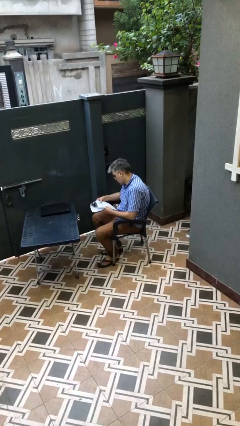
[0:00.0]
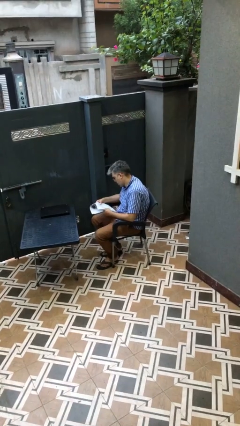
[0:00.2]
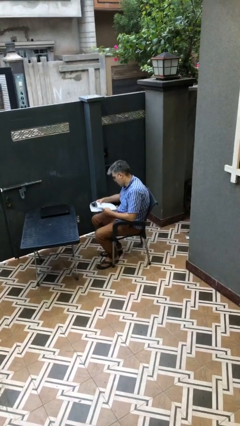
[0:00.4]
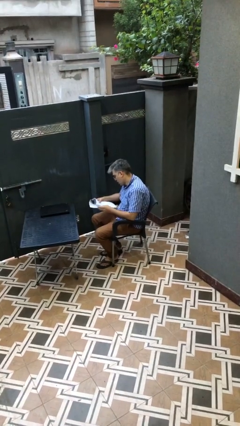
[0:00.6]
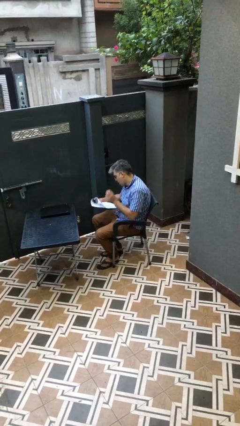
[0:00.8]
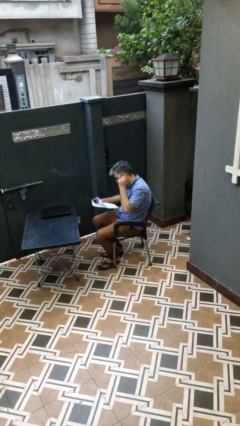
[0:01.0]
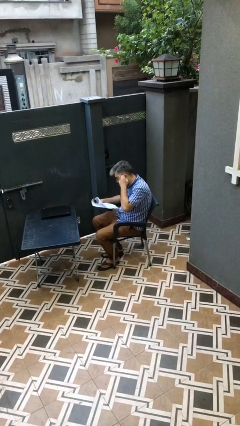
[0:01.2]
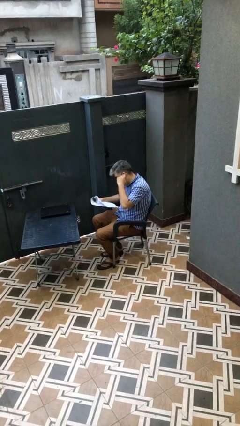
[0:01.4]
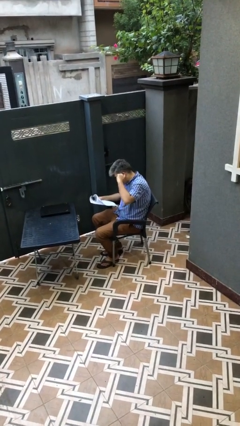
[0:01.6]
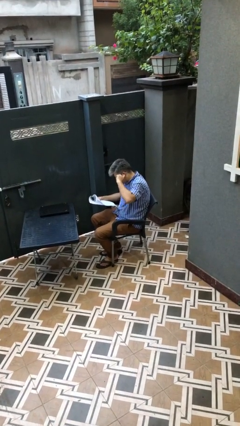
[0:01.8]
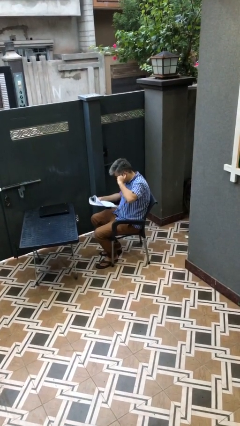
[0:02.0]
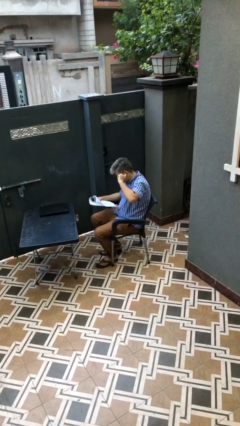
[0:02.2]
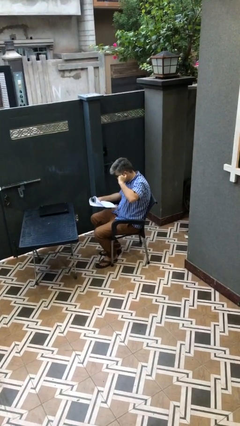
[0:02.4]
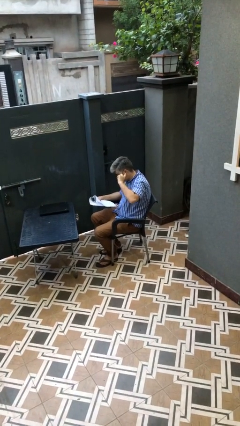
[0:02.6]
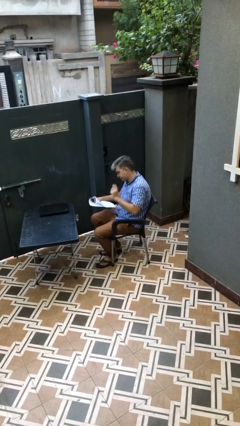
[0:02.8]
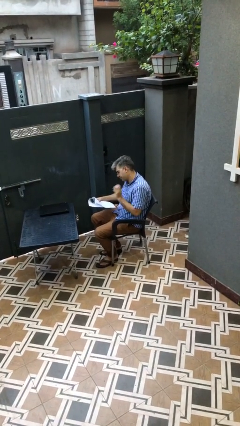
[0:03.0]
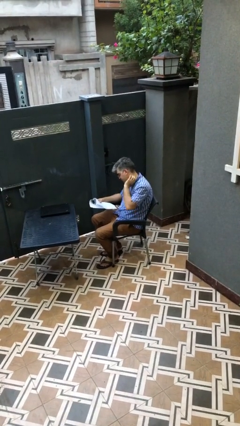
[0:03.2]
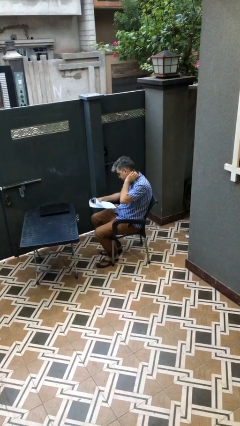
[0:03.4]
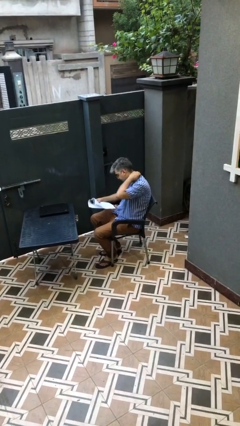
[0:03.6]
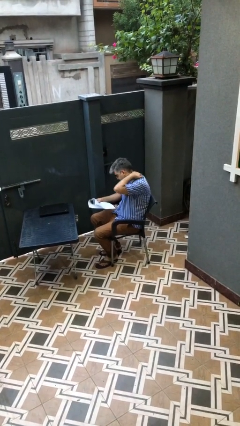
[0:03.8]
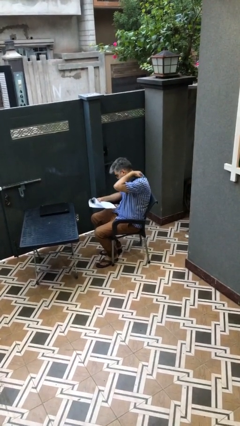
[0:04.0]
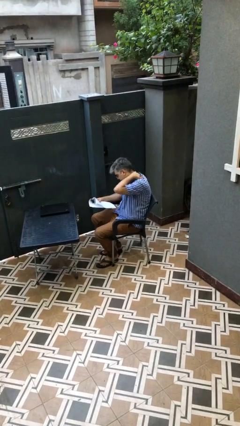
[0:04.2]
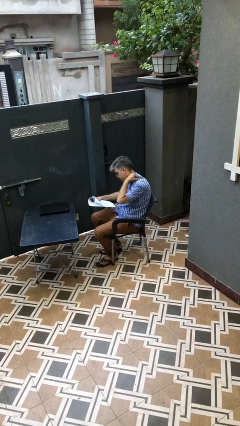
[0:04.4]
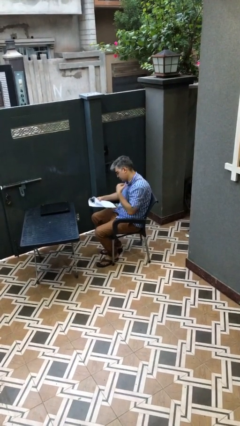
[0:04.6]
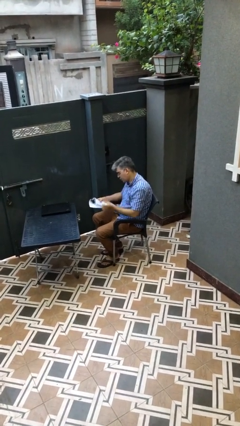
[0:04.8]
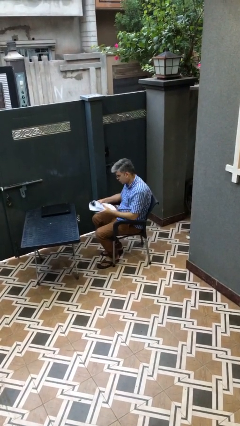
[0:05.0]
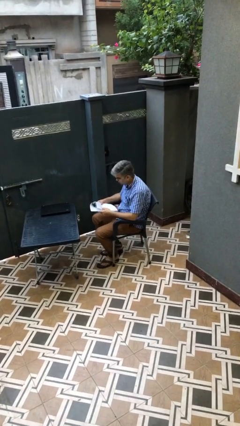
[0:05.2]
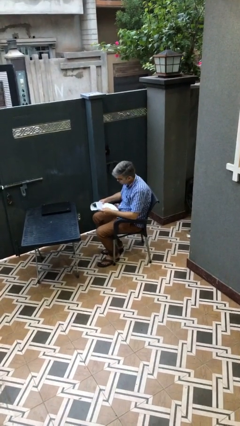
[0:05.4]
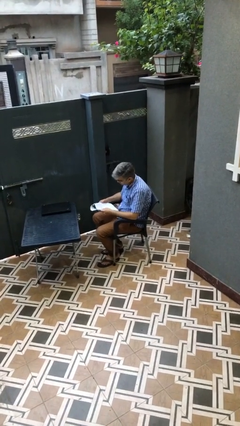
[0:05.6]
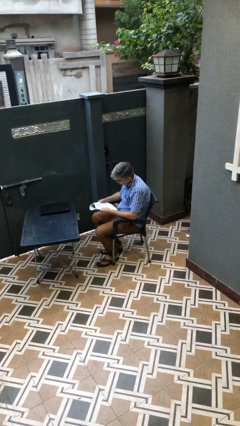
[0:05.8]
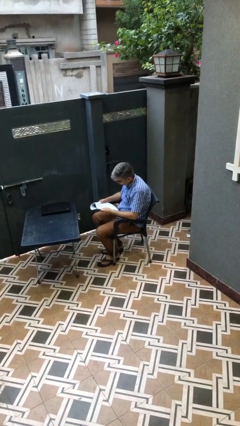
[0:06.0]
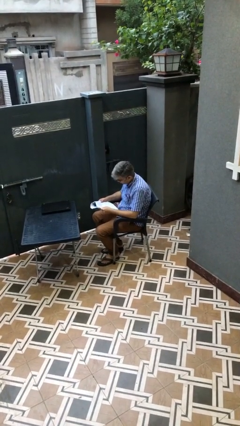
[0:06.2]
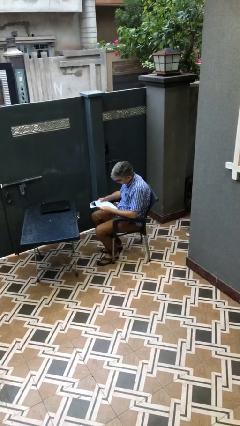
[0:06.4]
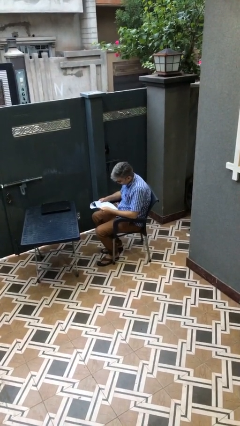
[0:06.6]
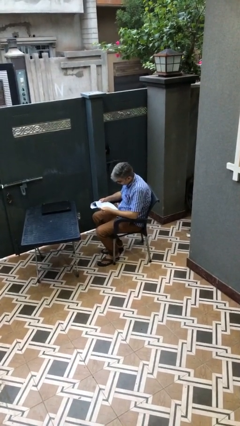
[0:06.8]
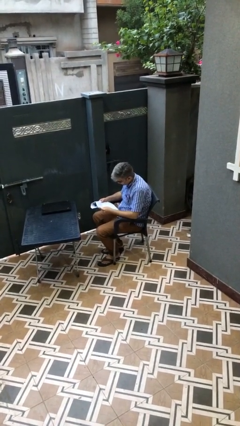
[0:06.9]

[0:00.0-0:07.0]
person reads document

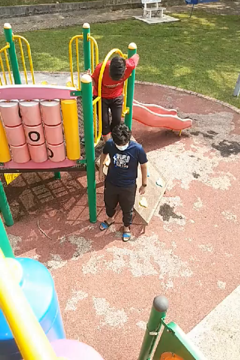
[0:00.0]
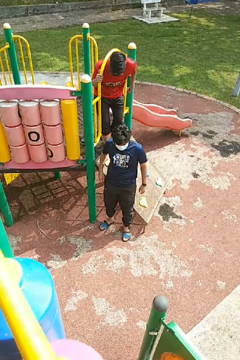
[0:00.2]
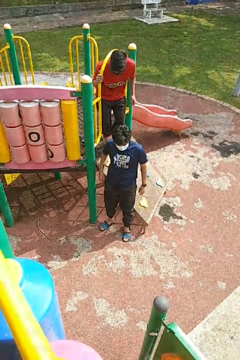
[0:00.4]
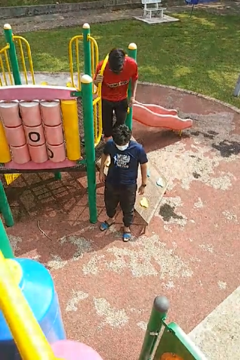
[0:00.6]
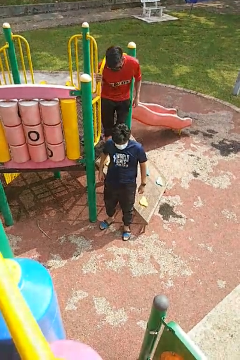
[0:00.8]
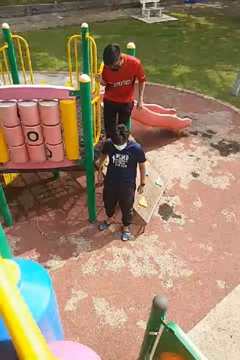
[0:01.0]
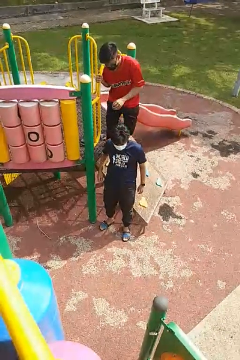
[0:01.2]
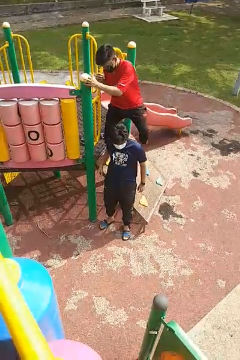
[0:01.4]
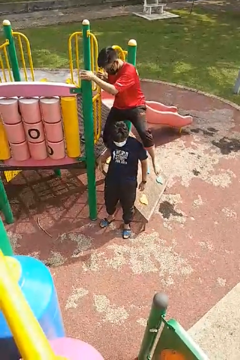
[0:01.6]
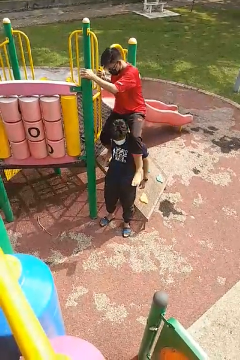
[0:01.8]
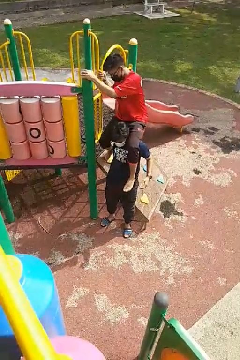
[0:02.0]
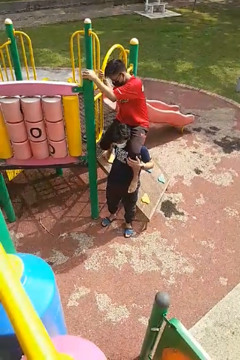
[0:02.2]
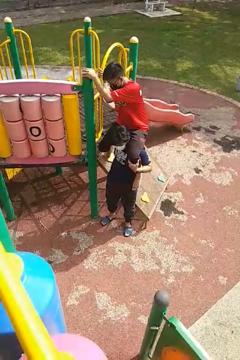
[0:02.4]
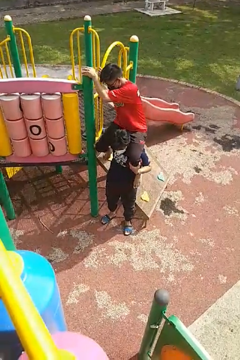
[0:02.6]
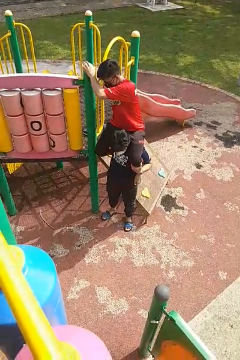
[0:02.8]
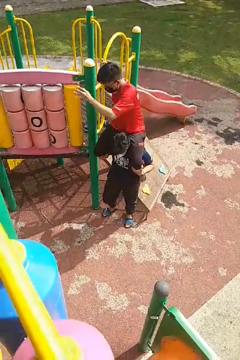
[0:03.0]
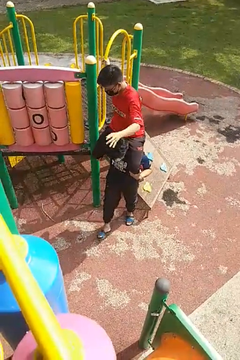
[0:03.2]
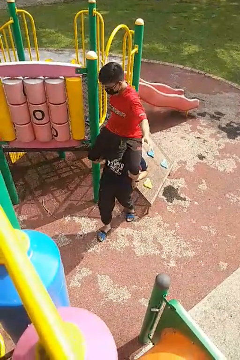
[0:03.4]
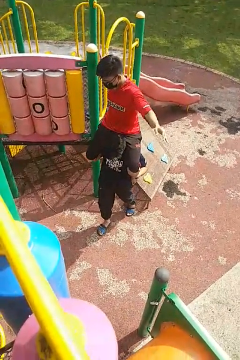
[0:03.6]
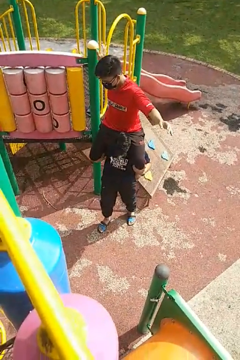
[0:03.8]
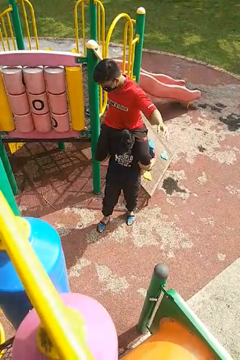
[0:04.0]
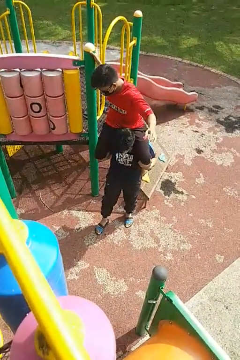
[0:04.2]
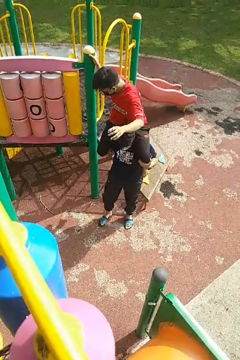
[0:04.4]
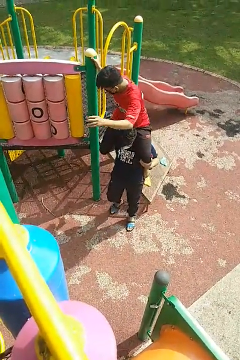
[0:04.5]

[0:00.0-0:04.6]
person carries person on shoulders

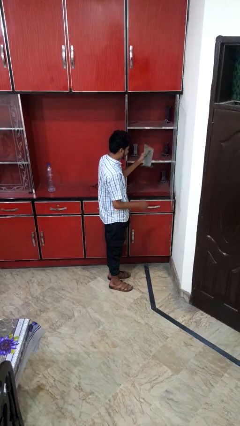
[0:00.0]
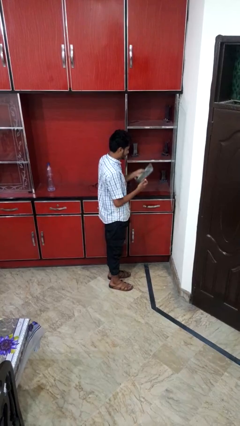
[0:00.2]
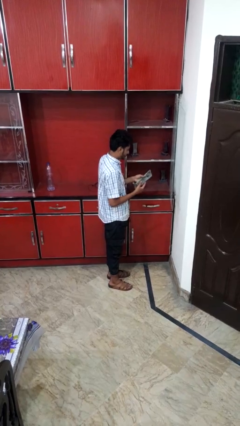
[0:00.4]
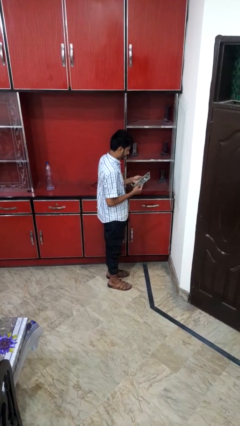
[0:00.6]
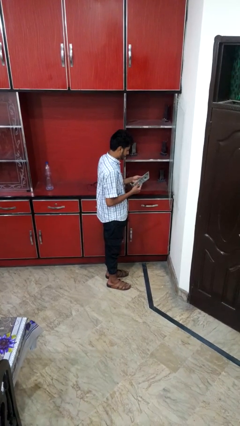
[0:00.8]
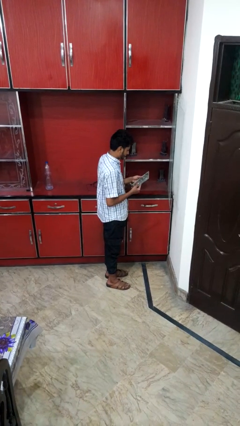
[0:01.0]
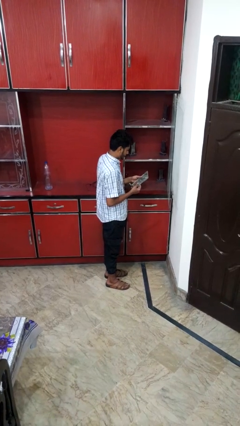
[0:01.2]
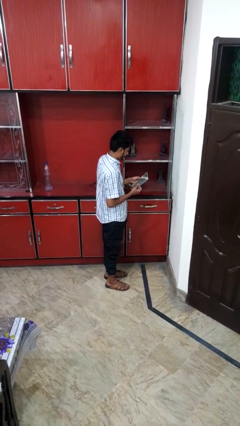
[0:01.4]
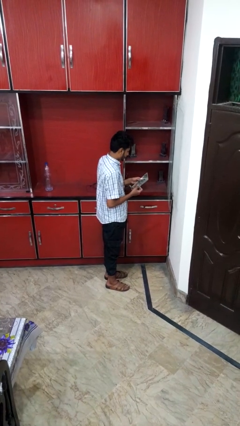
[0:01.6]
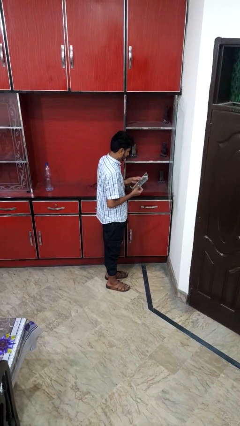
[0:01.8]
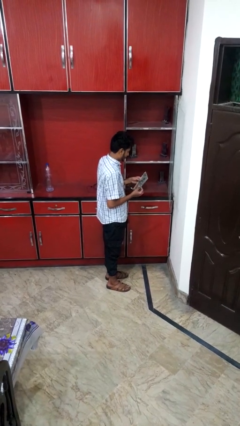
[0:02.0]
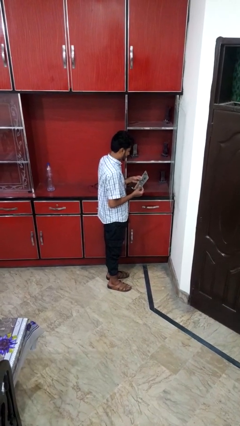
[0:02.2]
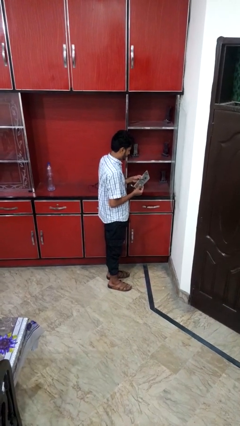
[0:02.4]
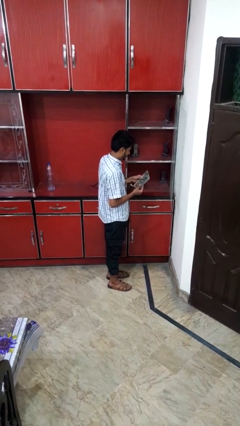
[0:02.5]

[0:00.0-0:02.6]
person picks up object from cabinet

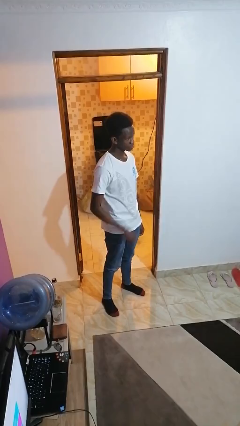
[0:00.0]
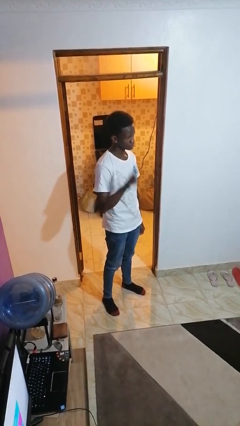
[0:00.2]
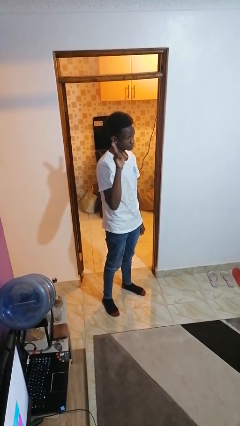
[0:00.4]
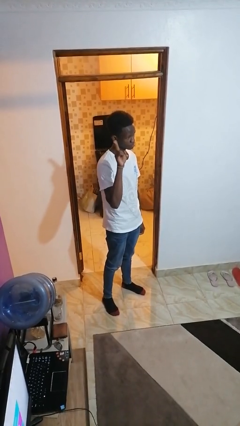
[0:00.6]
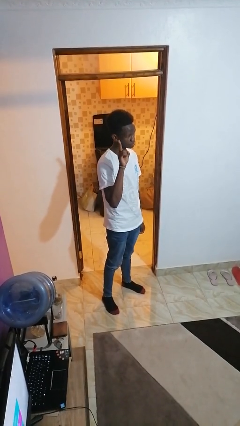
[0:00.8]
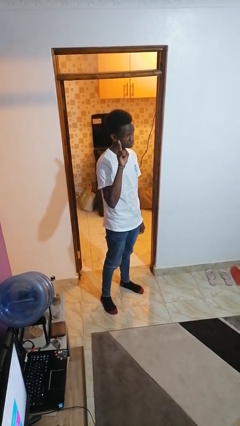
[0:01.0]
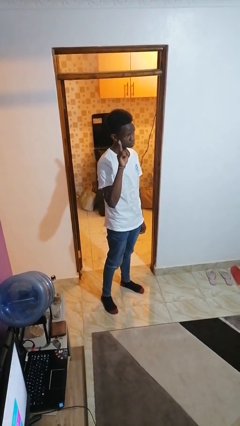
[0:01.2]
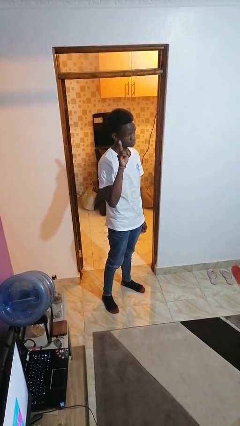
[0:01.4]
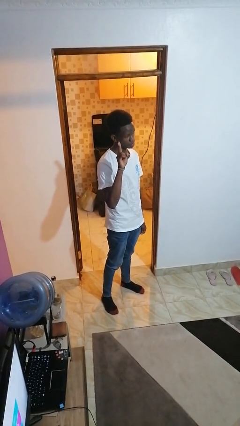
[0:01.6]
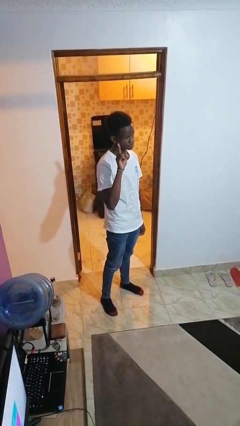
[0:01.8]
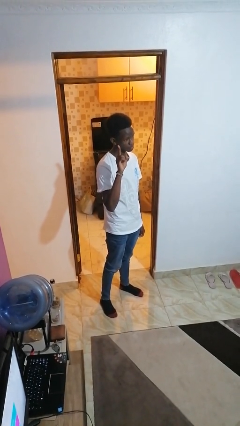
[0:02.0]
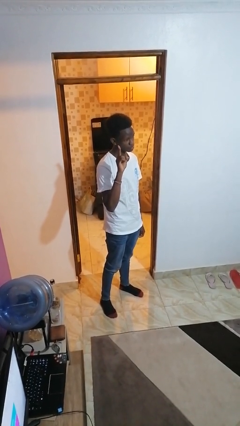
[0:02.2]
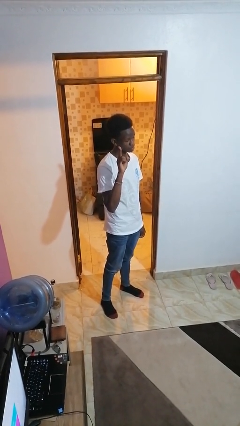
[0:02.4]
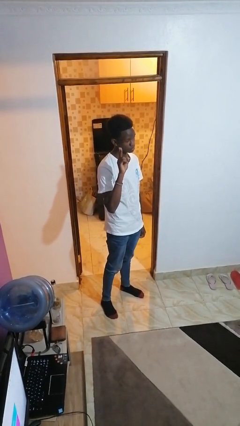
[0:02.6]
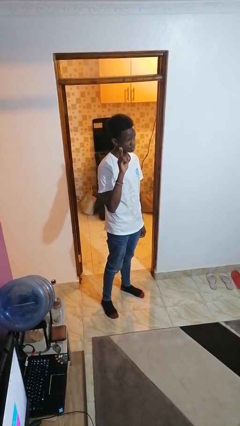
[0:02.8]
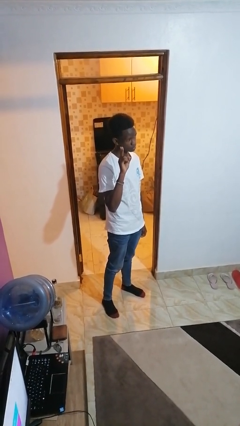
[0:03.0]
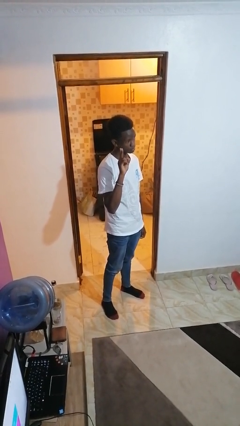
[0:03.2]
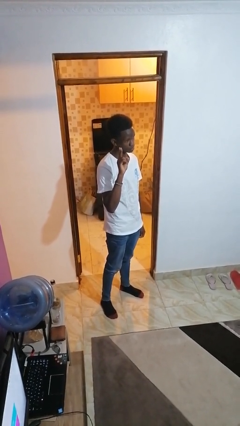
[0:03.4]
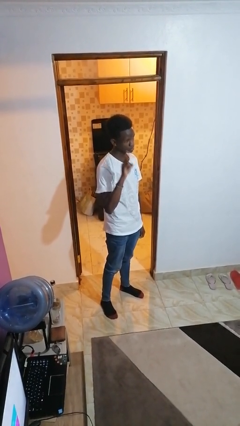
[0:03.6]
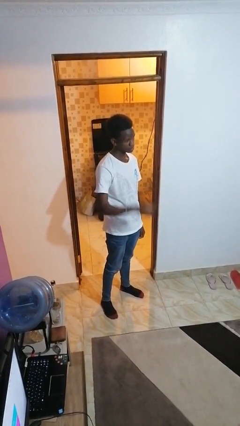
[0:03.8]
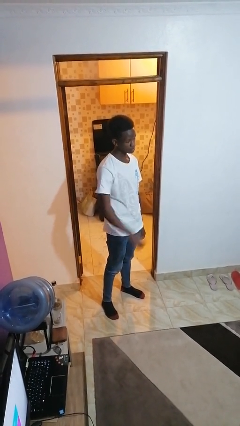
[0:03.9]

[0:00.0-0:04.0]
person gestures peace

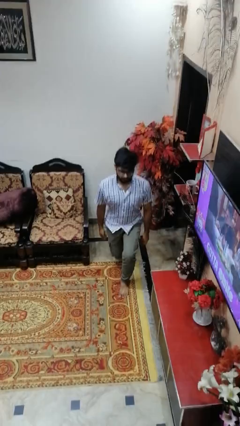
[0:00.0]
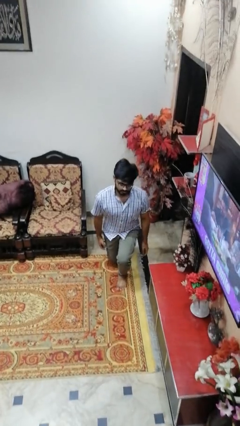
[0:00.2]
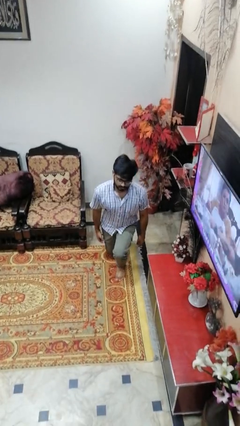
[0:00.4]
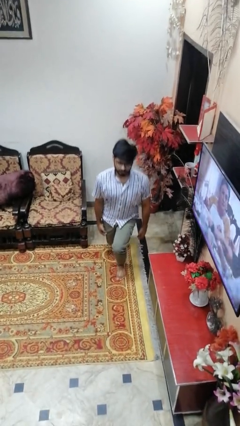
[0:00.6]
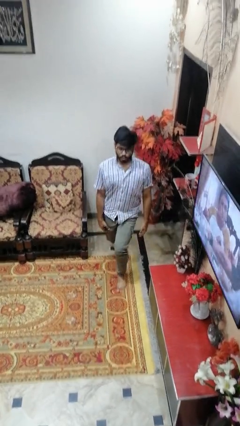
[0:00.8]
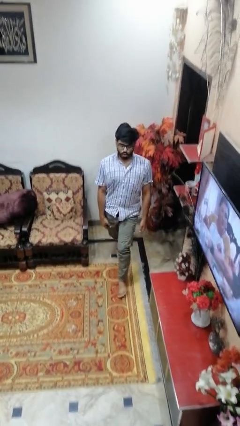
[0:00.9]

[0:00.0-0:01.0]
person exercises with lunges
